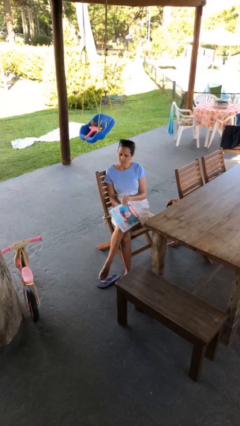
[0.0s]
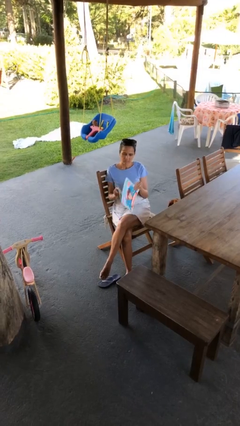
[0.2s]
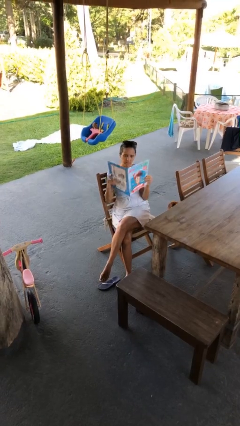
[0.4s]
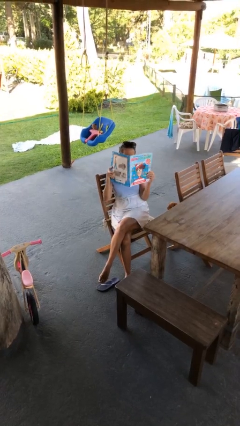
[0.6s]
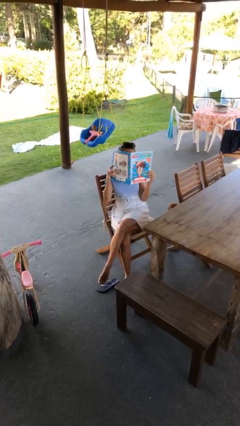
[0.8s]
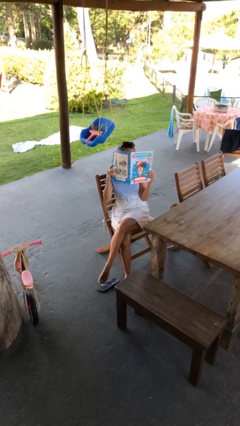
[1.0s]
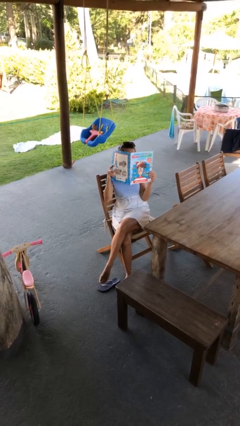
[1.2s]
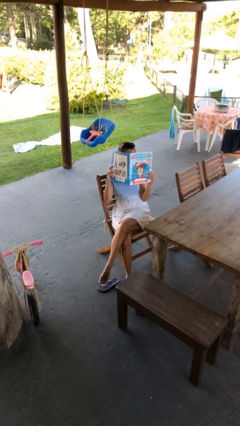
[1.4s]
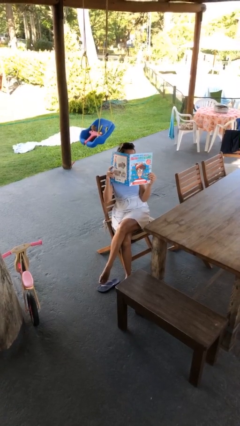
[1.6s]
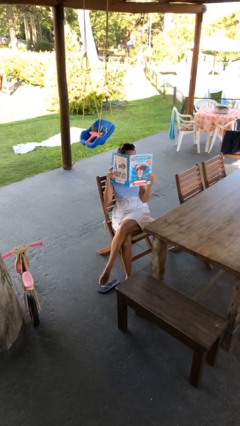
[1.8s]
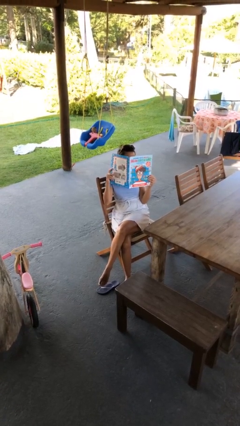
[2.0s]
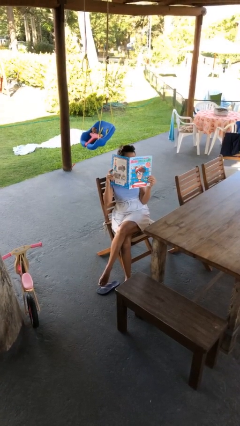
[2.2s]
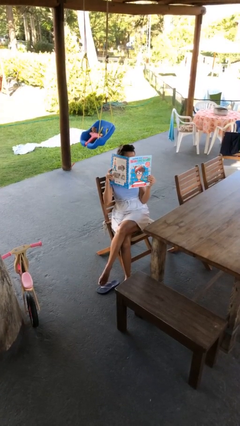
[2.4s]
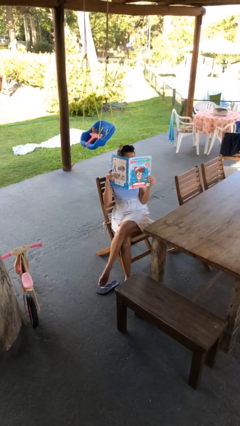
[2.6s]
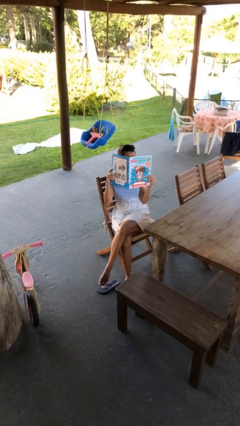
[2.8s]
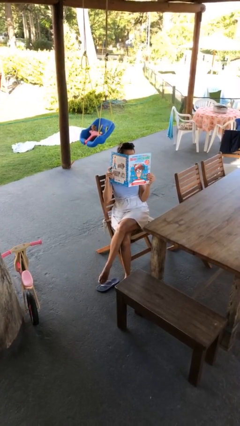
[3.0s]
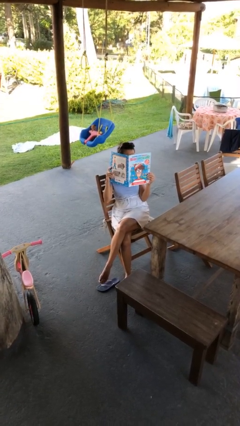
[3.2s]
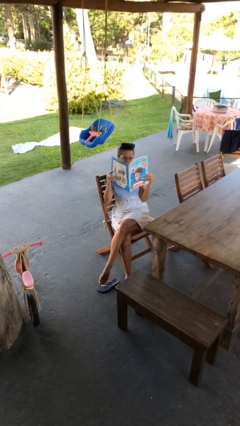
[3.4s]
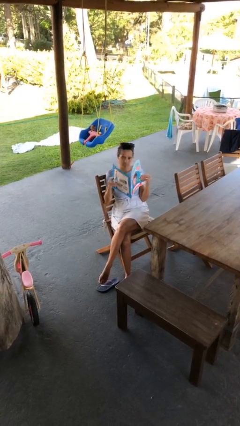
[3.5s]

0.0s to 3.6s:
person reads document

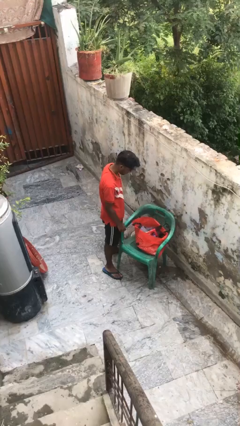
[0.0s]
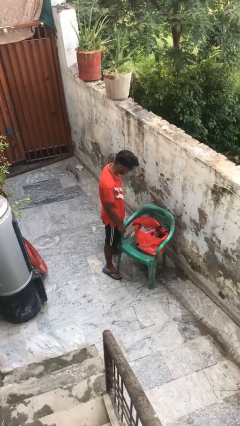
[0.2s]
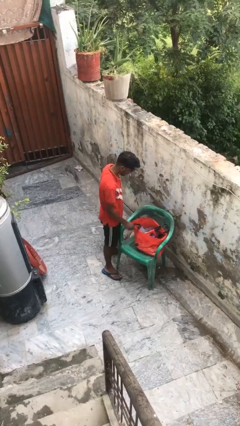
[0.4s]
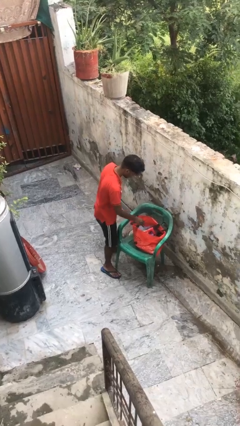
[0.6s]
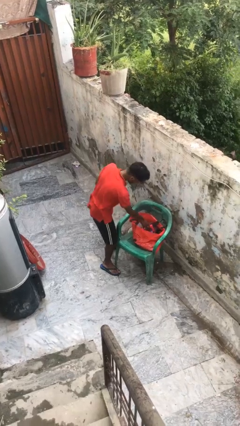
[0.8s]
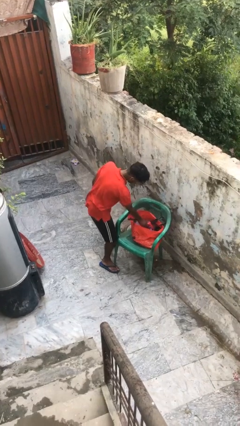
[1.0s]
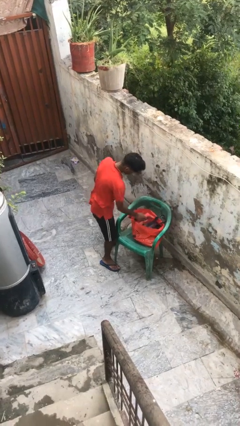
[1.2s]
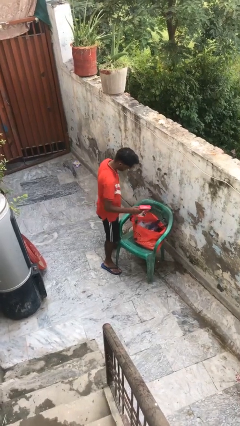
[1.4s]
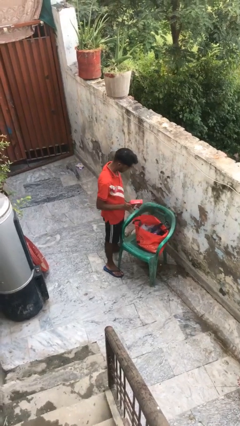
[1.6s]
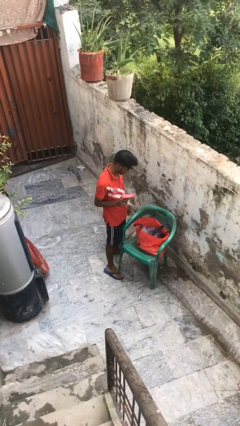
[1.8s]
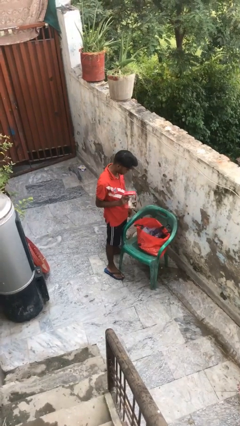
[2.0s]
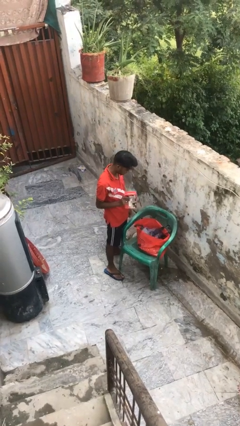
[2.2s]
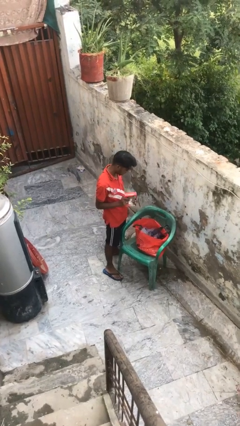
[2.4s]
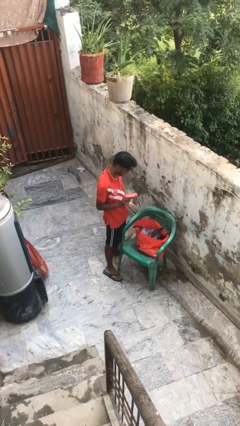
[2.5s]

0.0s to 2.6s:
person takes object from bag

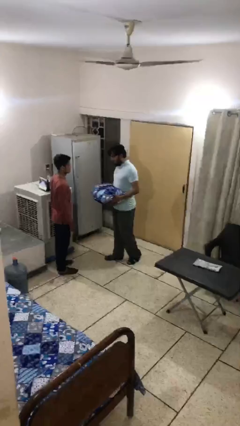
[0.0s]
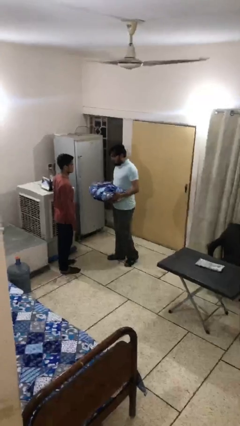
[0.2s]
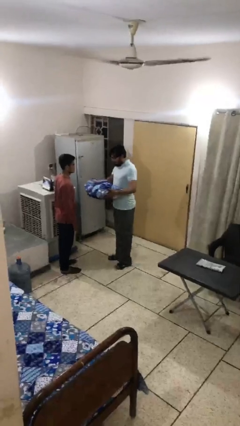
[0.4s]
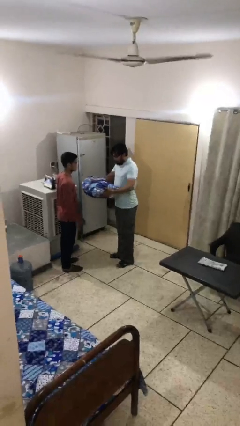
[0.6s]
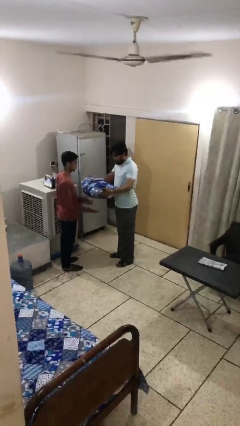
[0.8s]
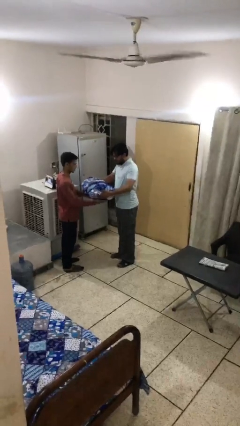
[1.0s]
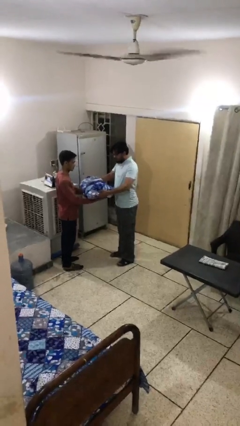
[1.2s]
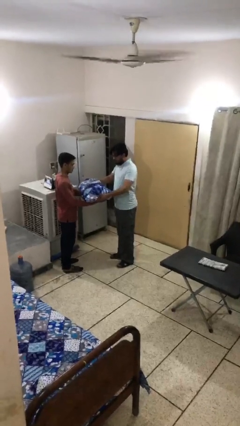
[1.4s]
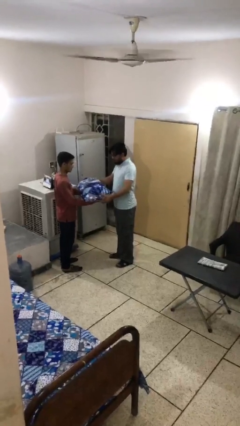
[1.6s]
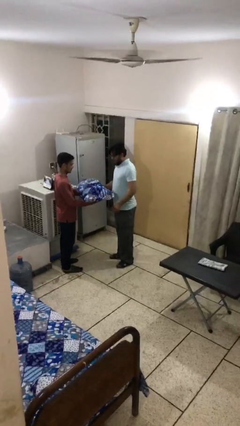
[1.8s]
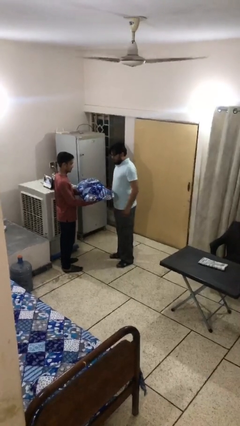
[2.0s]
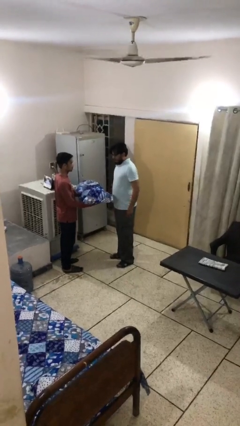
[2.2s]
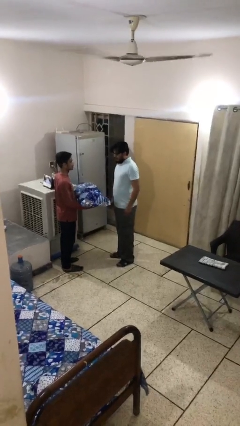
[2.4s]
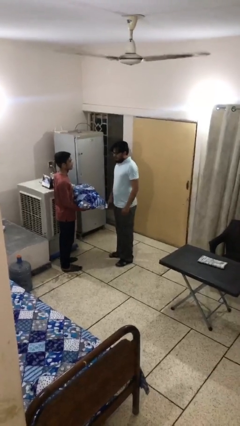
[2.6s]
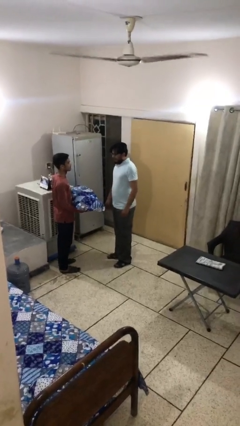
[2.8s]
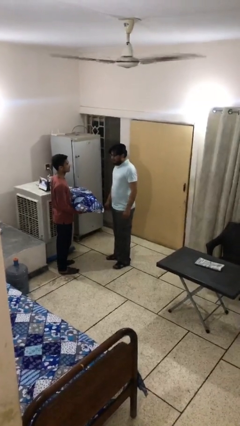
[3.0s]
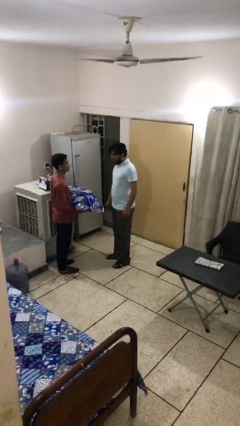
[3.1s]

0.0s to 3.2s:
person transfers object to person

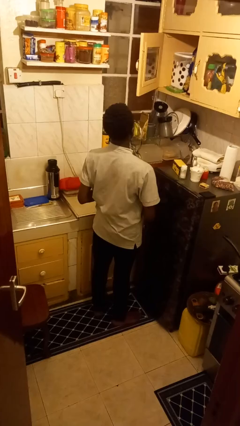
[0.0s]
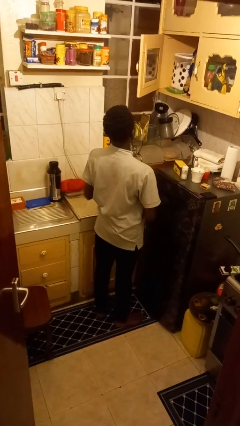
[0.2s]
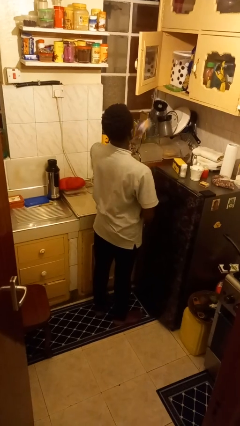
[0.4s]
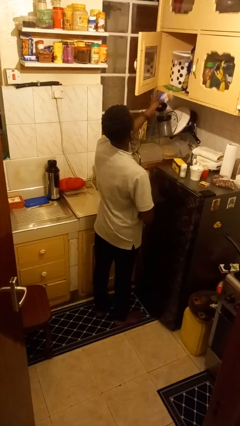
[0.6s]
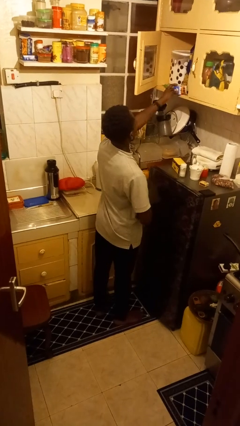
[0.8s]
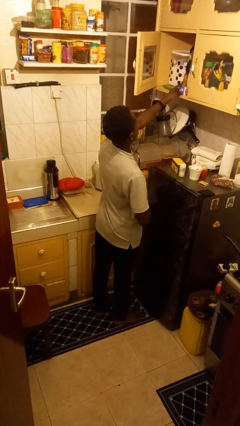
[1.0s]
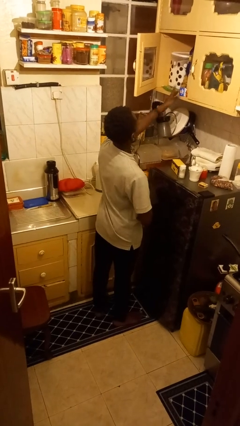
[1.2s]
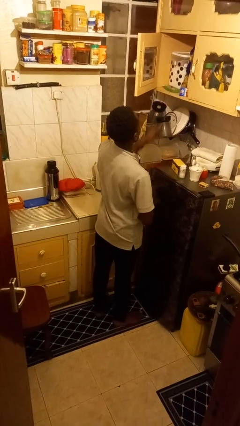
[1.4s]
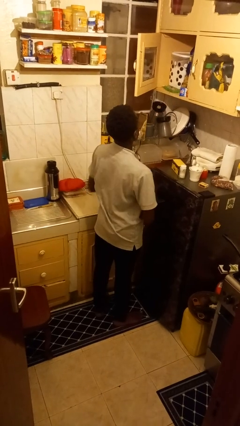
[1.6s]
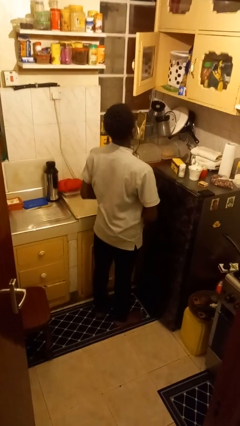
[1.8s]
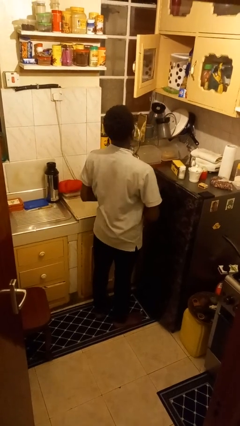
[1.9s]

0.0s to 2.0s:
person puts down object into cabinet

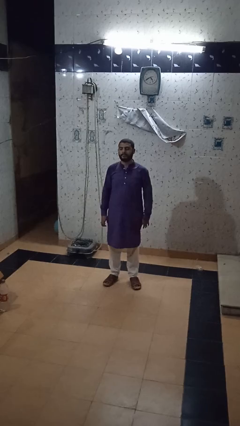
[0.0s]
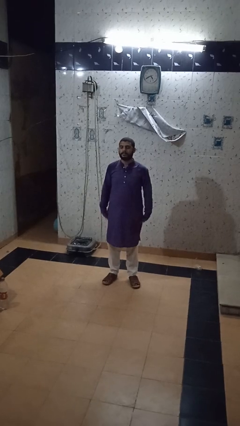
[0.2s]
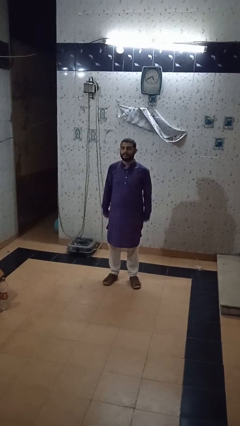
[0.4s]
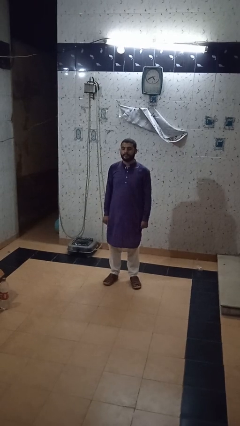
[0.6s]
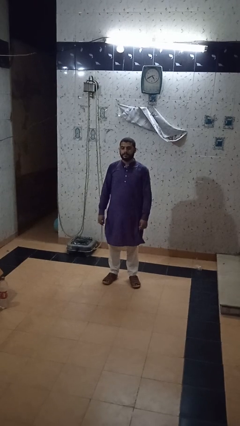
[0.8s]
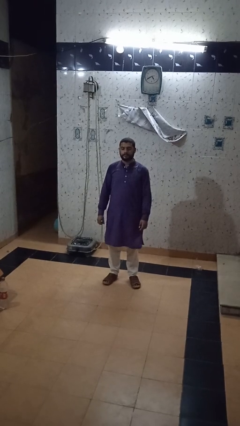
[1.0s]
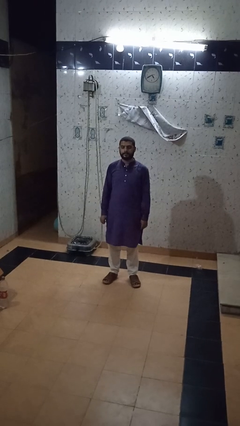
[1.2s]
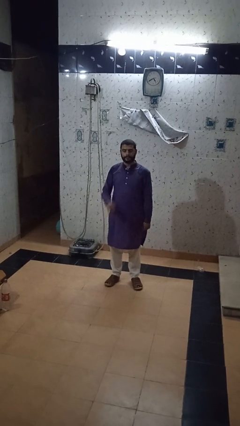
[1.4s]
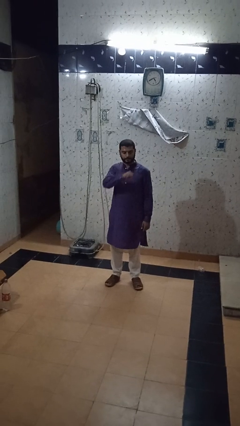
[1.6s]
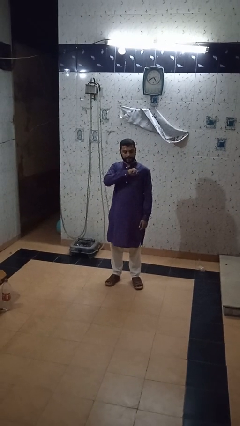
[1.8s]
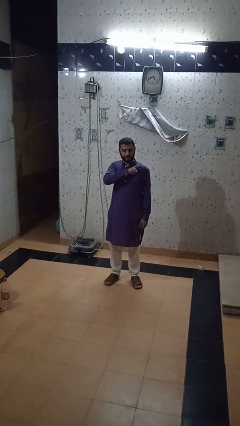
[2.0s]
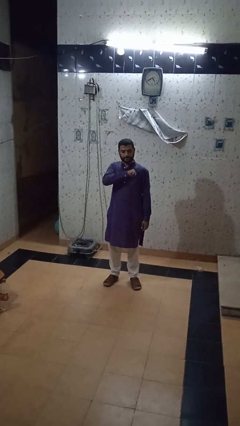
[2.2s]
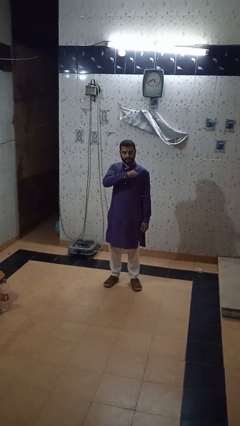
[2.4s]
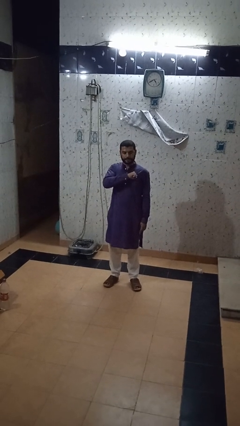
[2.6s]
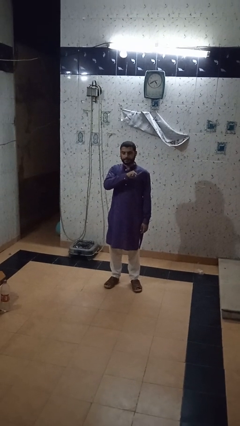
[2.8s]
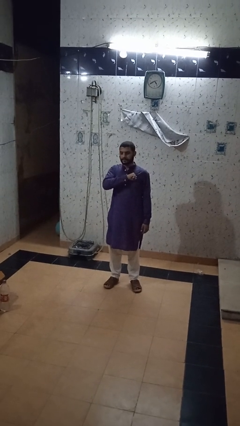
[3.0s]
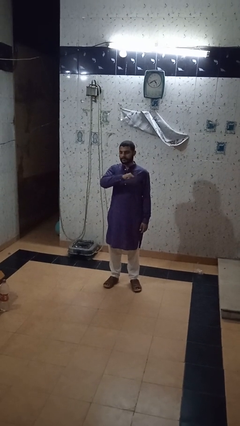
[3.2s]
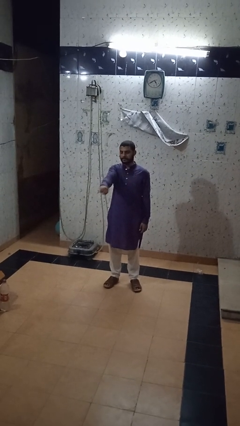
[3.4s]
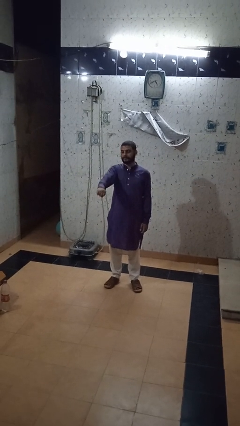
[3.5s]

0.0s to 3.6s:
person drums on chest

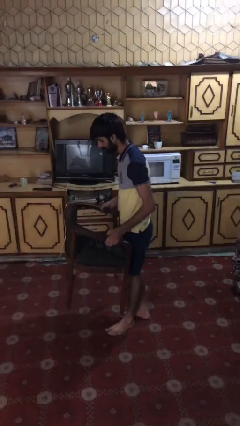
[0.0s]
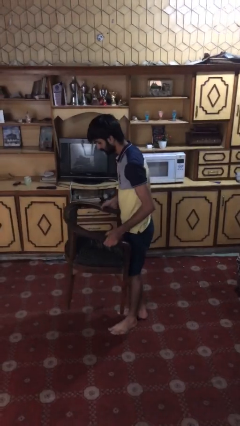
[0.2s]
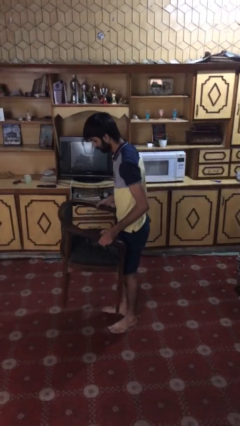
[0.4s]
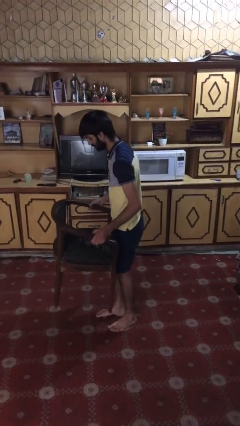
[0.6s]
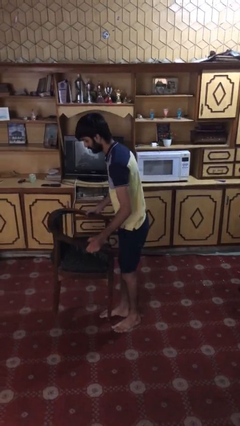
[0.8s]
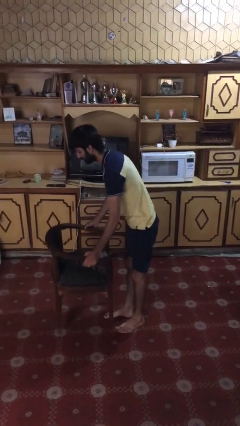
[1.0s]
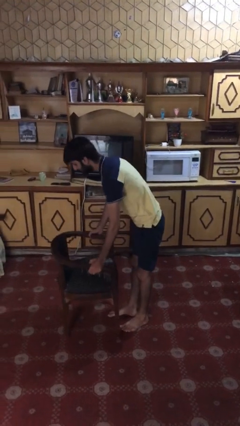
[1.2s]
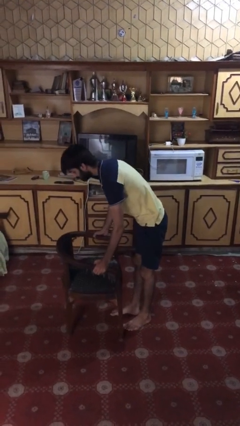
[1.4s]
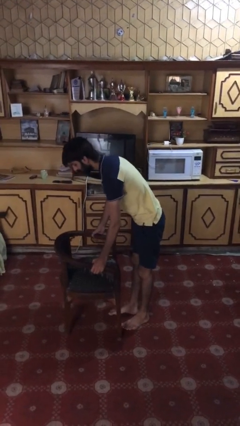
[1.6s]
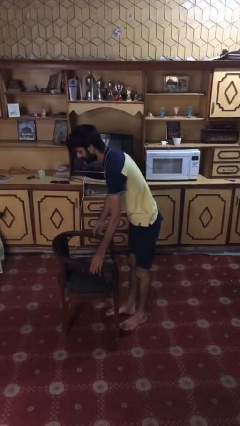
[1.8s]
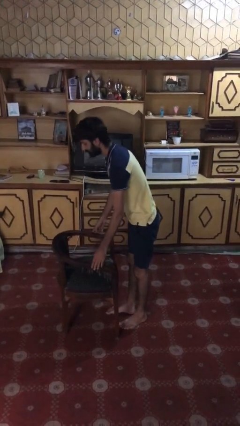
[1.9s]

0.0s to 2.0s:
person puts down object on floor
